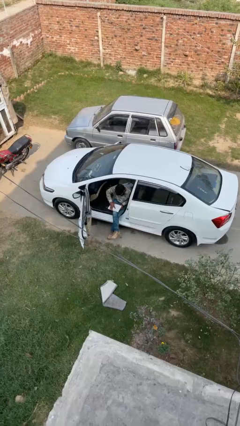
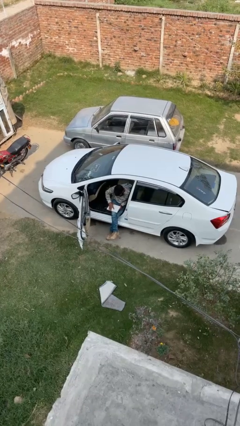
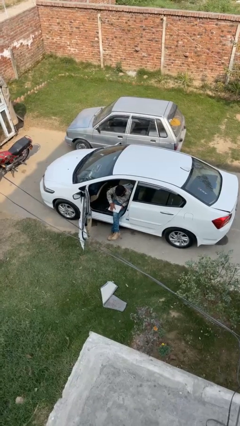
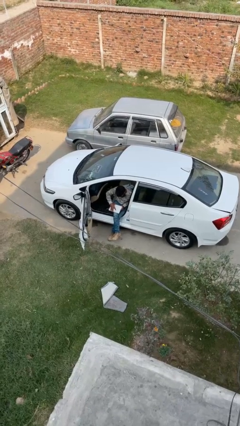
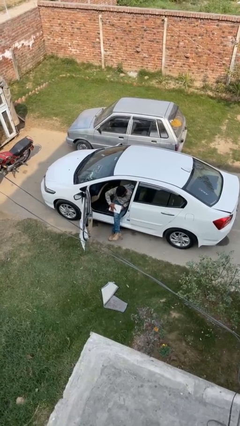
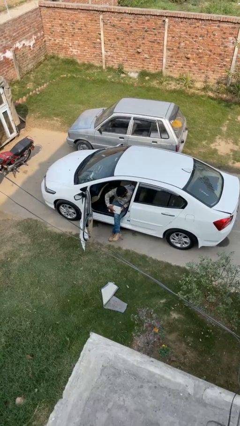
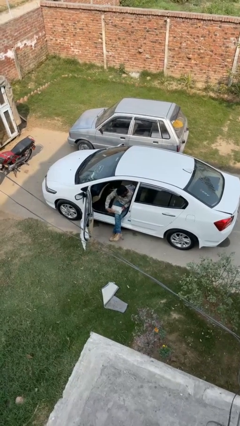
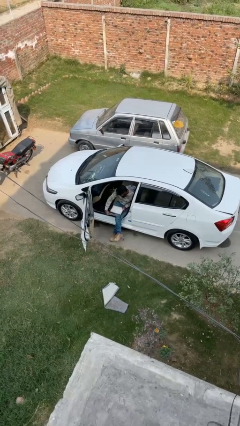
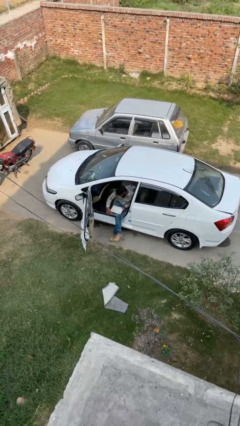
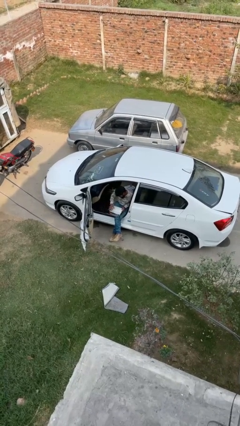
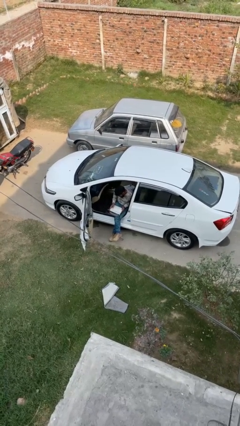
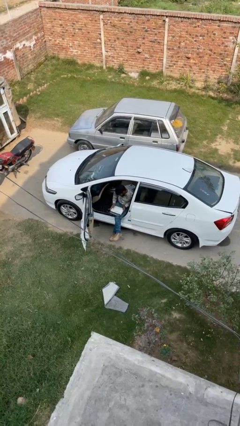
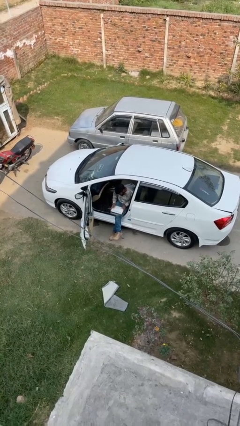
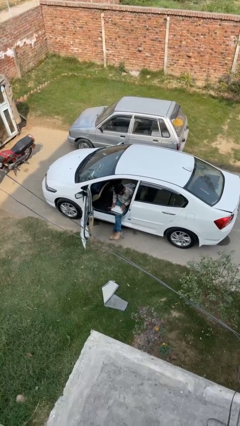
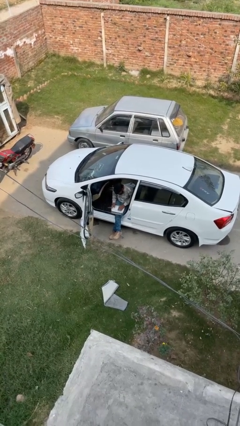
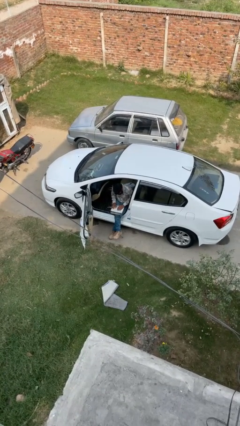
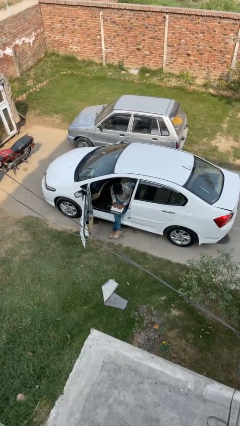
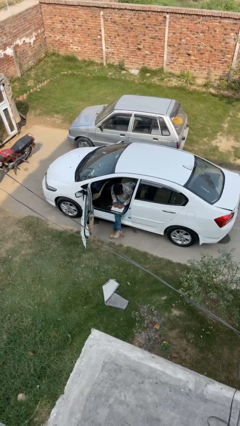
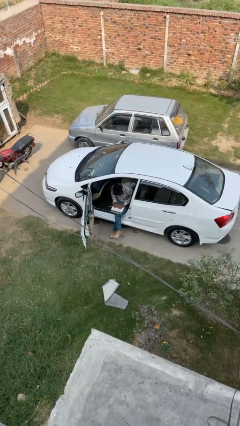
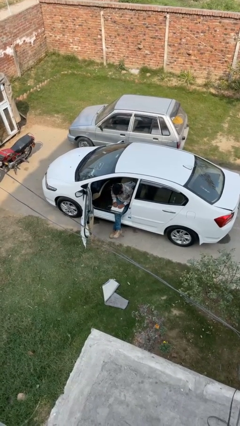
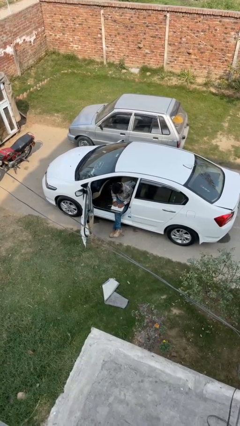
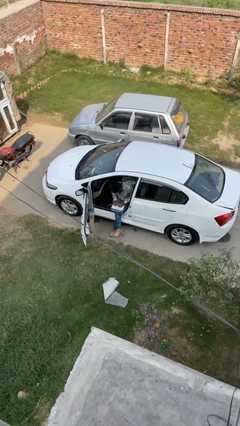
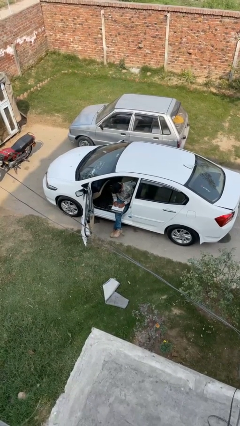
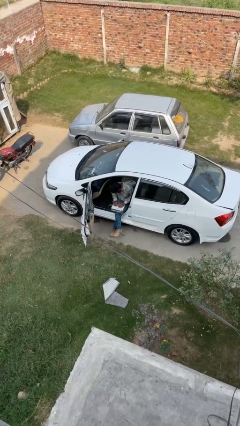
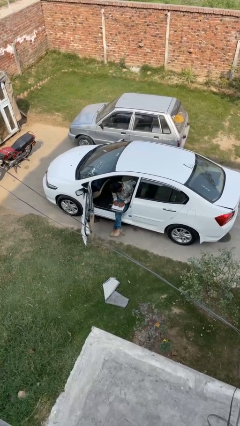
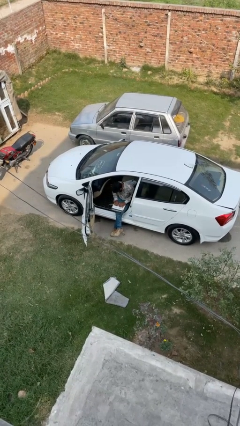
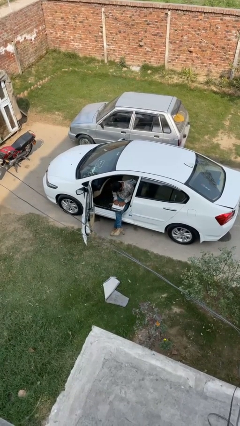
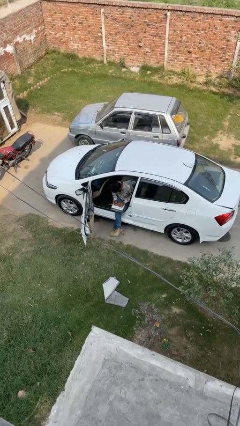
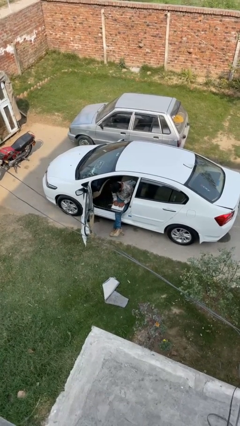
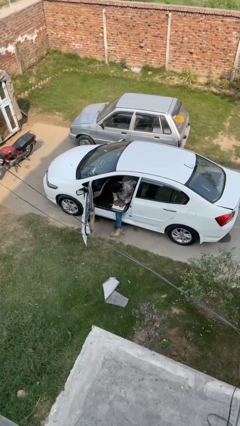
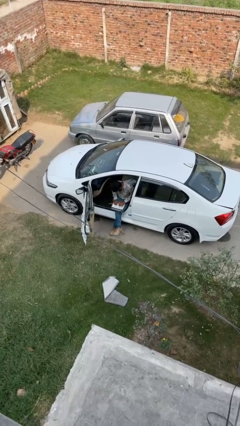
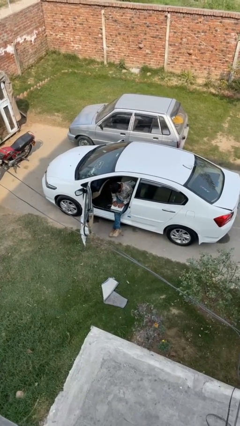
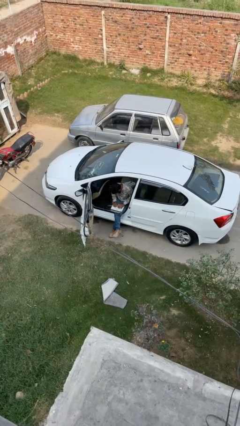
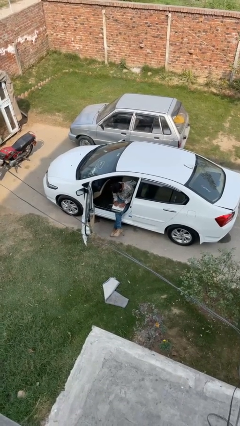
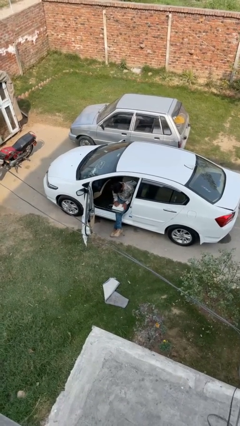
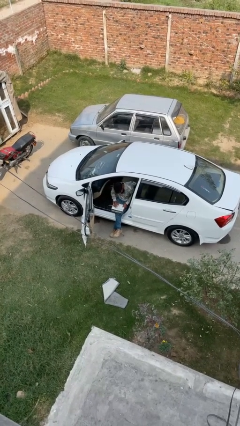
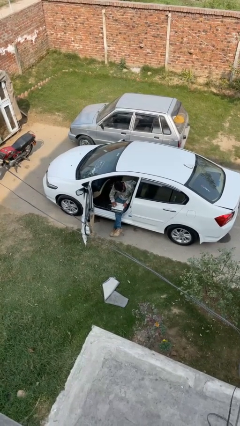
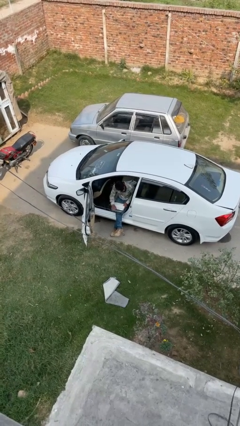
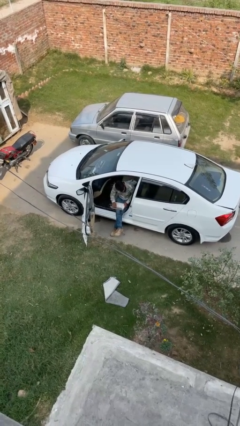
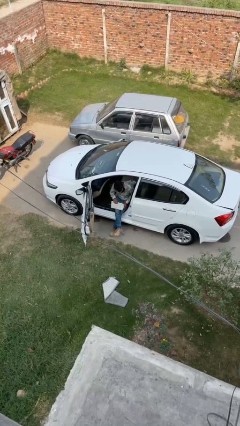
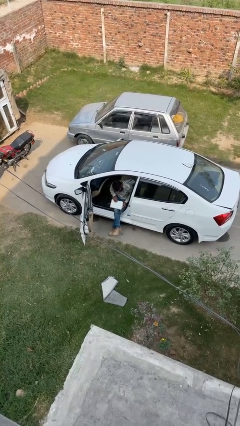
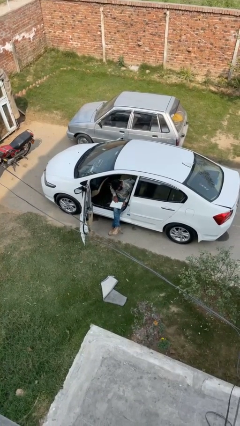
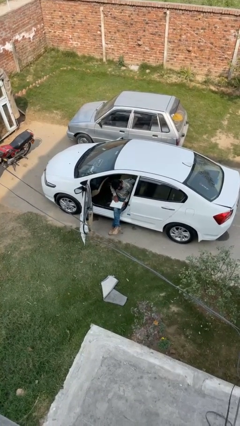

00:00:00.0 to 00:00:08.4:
person interacts with laptop

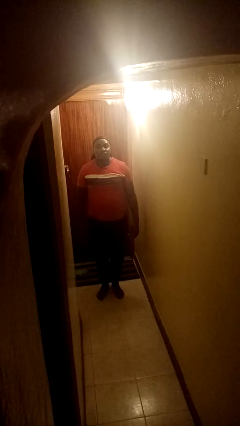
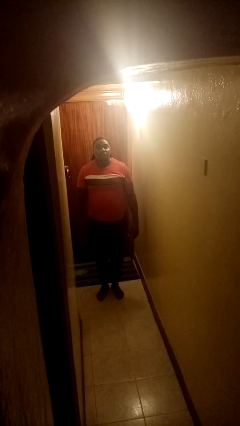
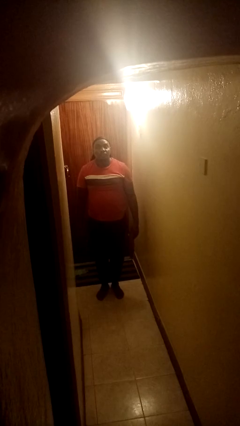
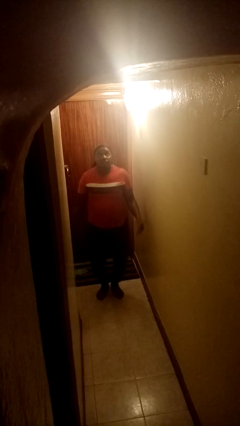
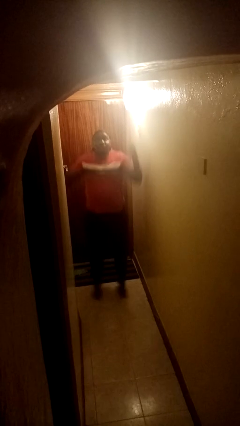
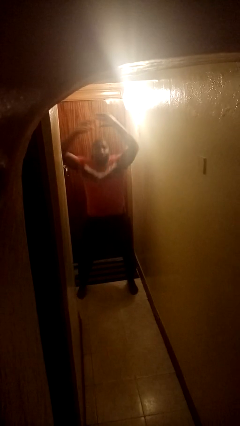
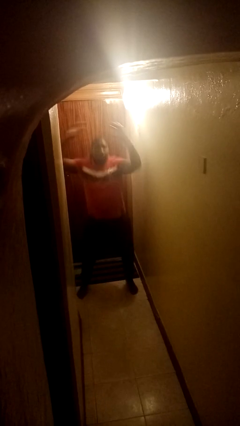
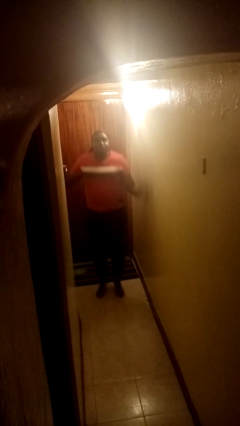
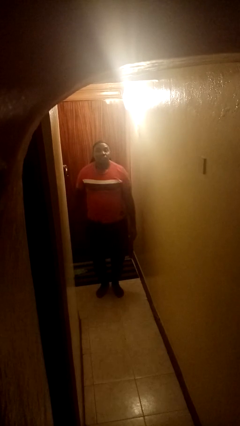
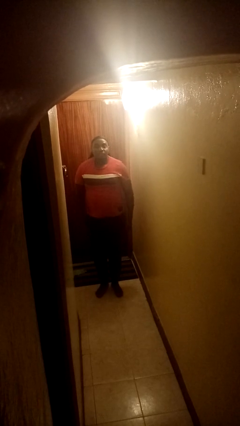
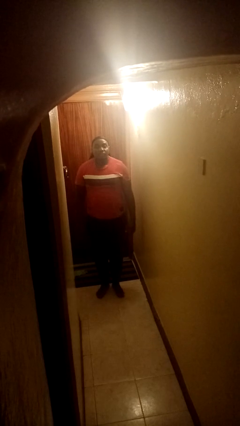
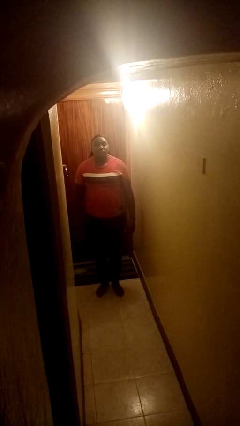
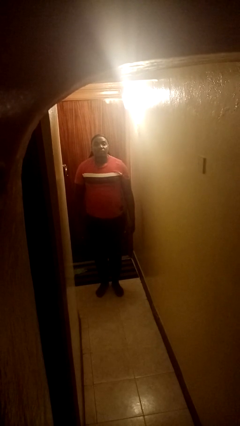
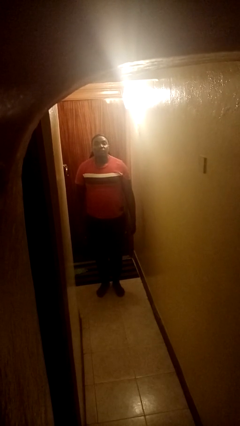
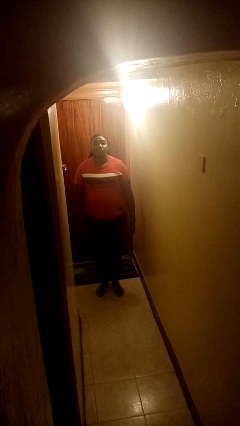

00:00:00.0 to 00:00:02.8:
person exercises with jumping jacks

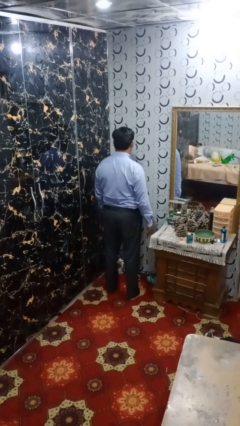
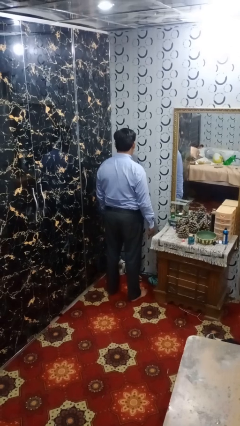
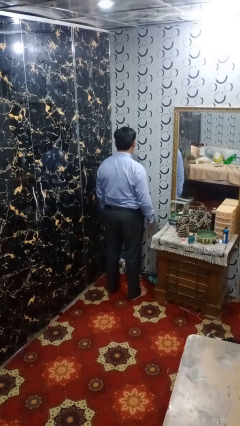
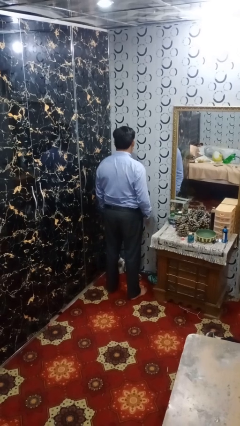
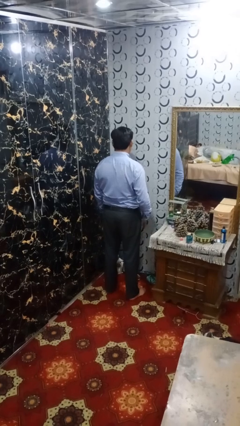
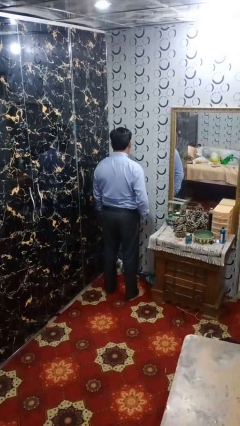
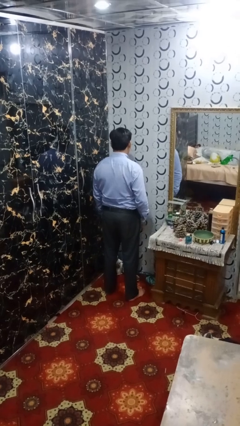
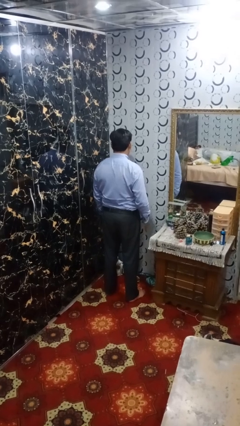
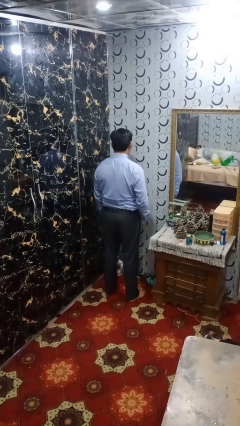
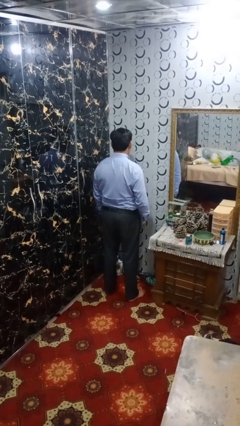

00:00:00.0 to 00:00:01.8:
person slaps hands on thighs

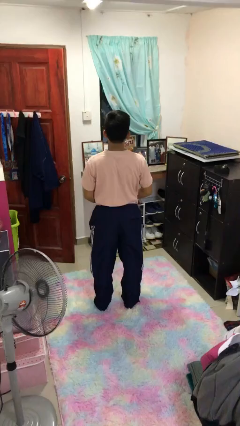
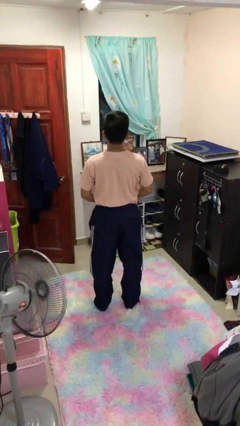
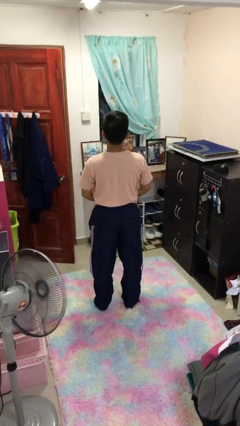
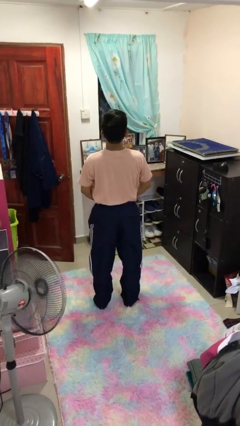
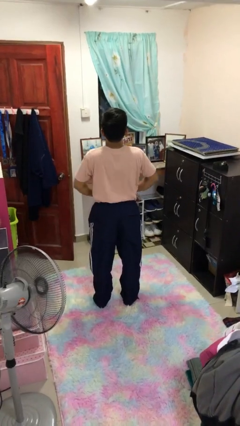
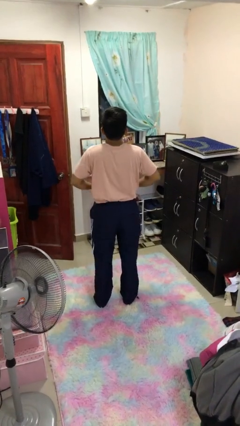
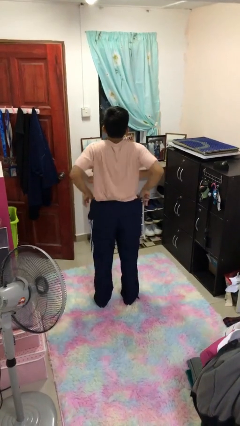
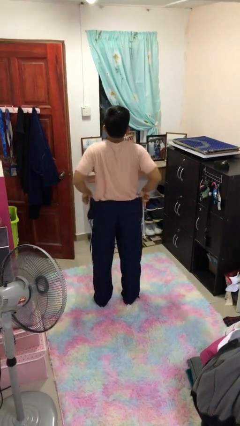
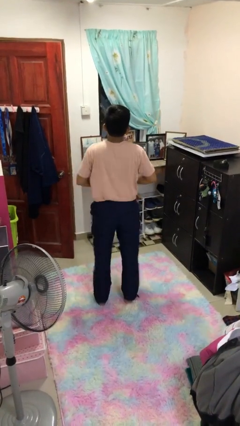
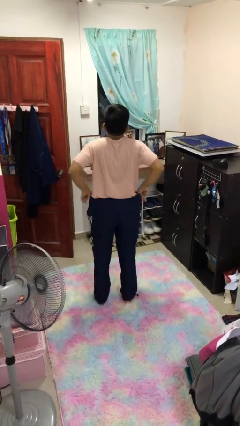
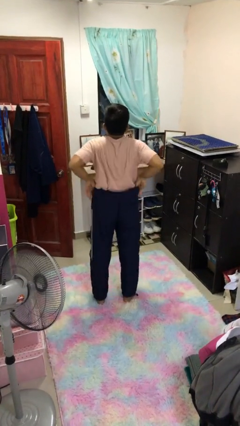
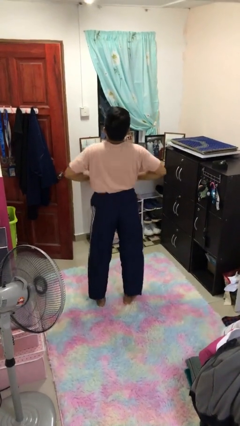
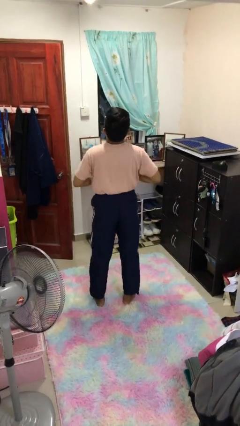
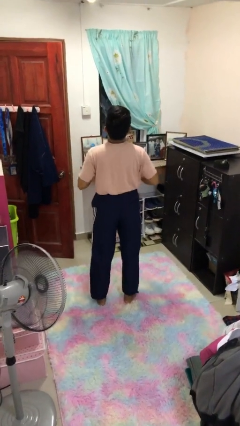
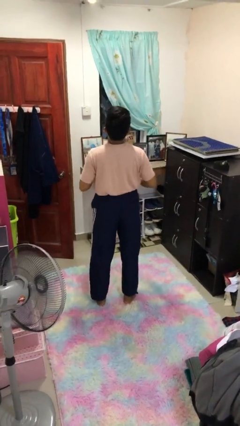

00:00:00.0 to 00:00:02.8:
person hikes up pants

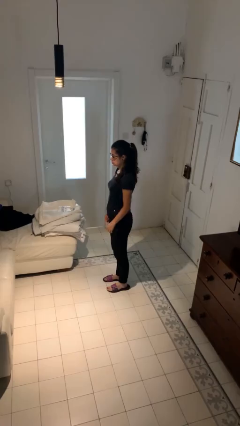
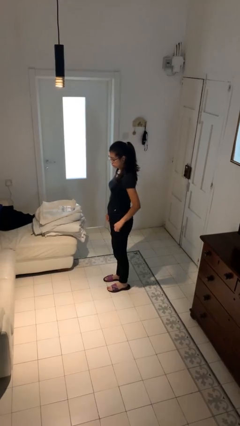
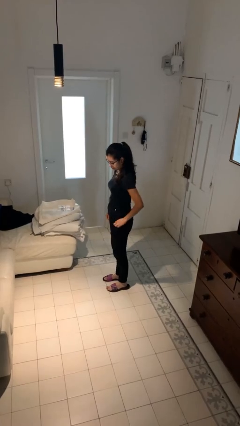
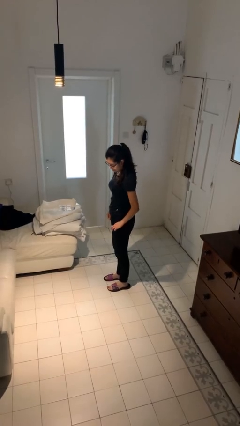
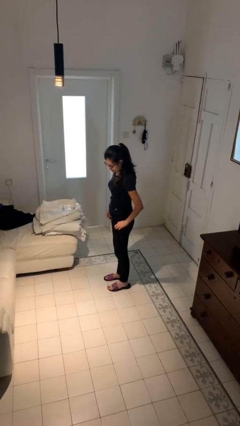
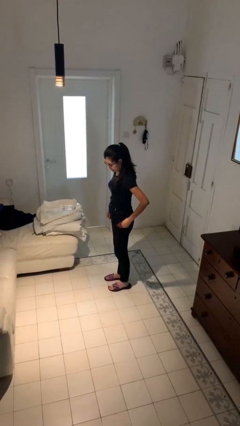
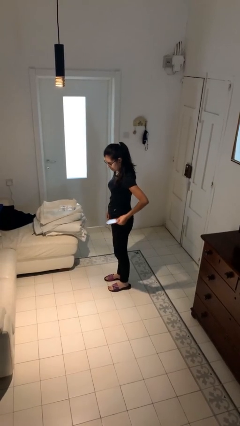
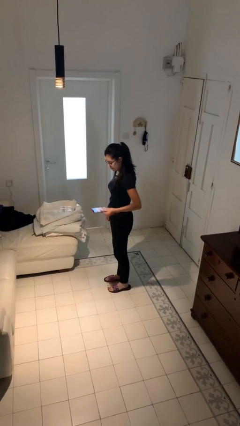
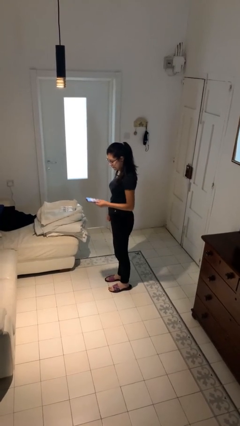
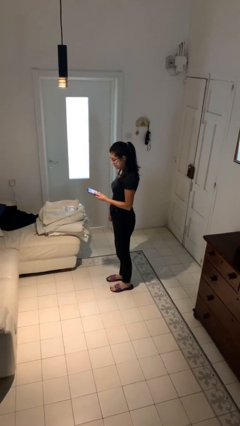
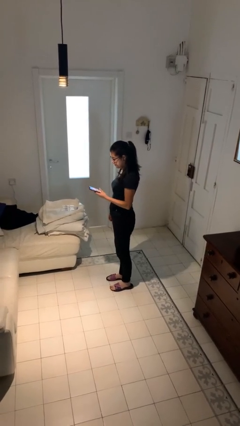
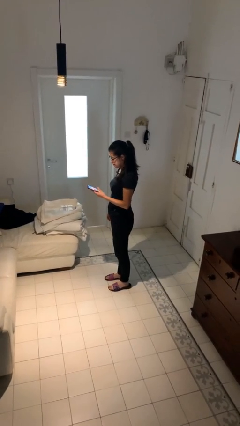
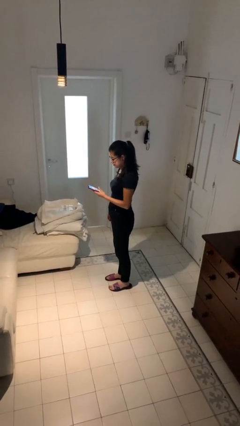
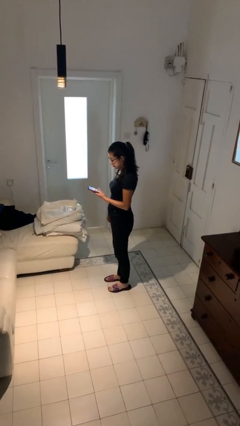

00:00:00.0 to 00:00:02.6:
person takes phone from pocket
